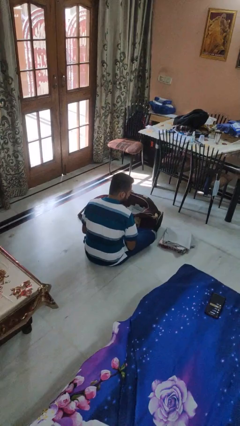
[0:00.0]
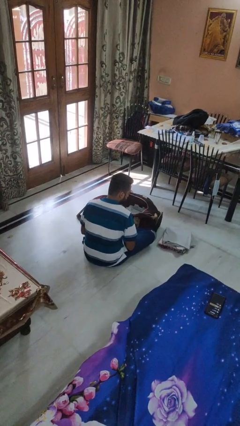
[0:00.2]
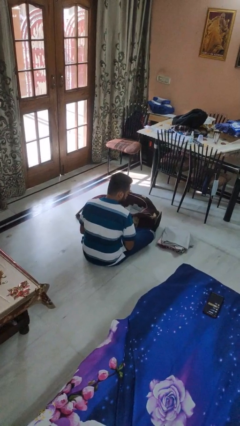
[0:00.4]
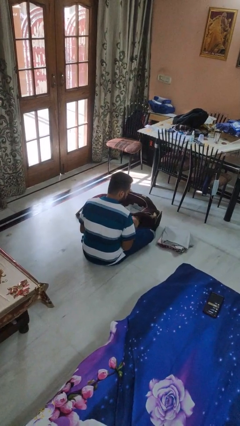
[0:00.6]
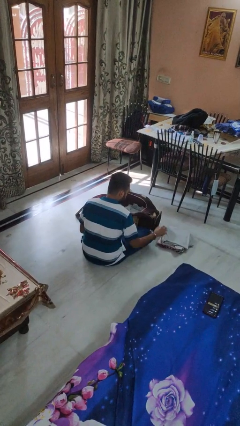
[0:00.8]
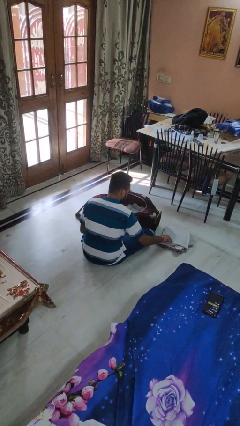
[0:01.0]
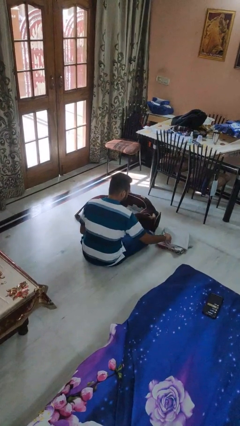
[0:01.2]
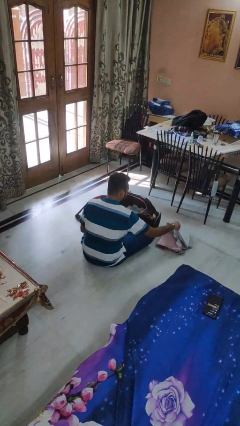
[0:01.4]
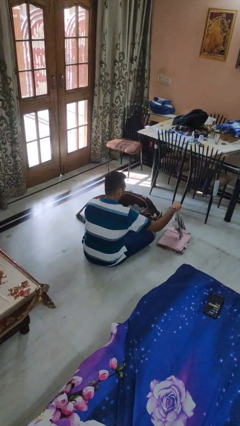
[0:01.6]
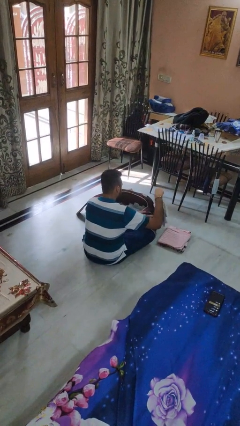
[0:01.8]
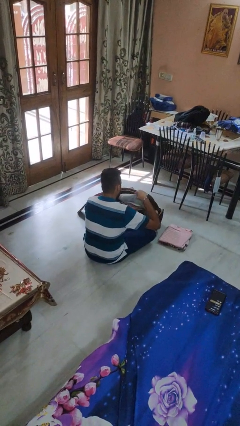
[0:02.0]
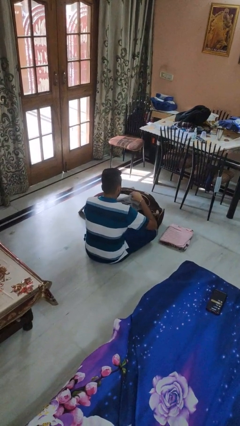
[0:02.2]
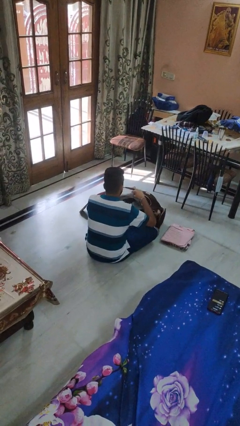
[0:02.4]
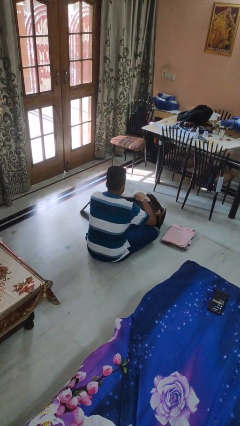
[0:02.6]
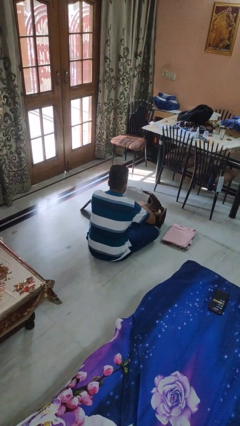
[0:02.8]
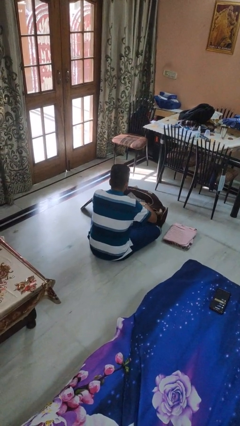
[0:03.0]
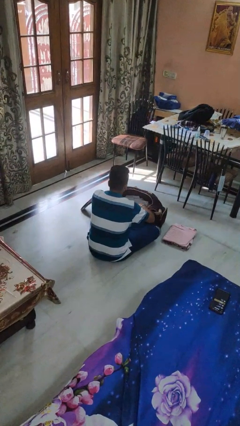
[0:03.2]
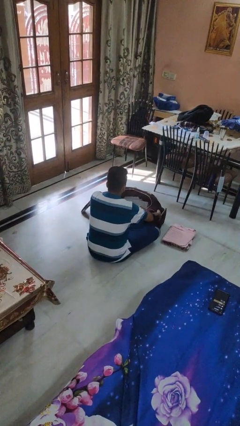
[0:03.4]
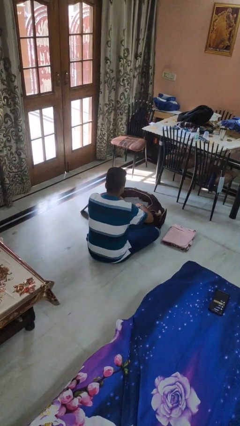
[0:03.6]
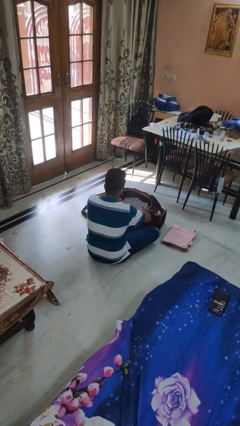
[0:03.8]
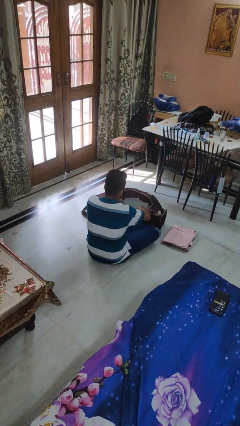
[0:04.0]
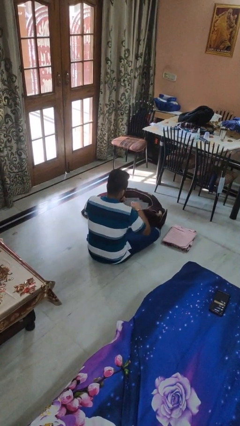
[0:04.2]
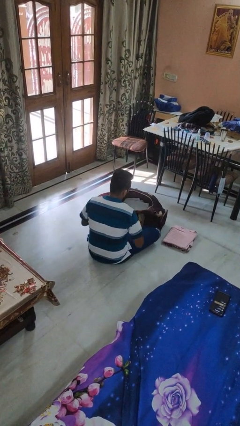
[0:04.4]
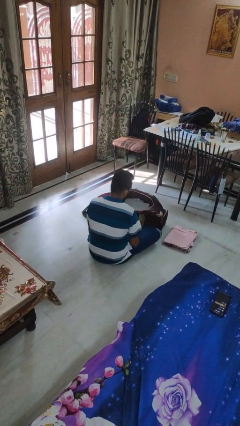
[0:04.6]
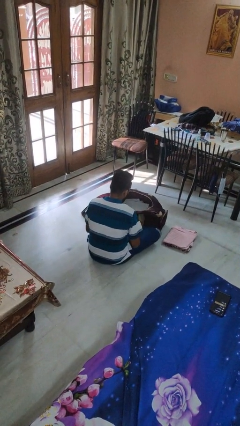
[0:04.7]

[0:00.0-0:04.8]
person loads clothes into suitcase

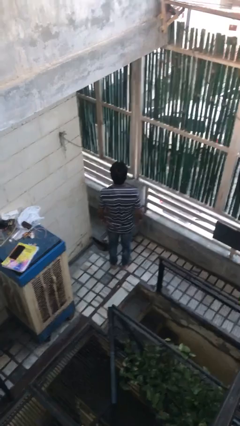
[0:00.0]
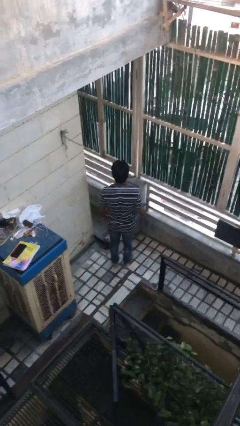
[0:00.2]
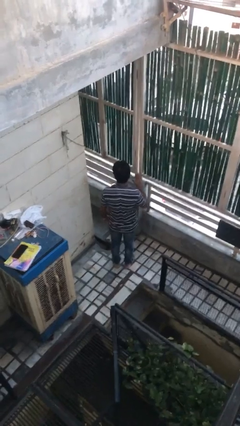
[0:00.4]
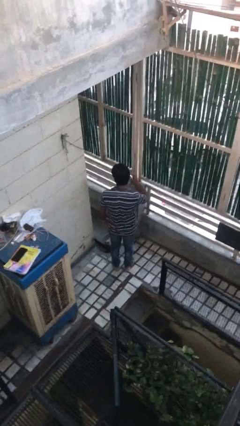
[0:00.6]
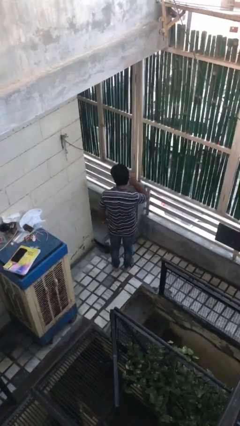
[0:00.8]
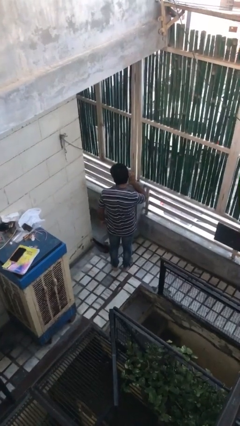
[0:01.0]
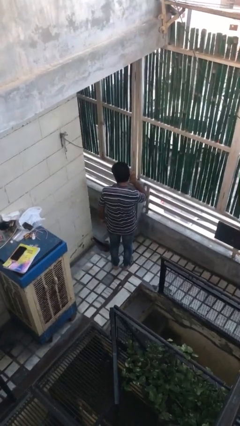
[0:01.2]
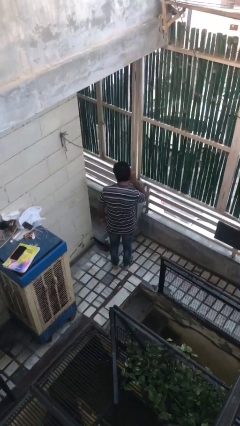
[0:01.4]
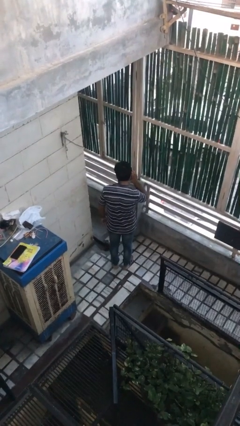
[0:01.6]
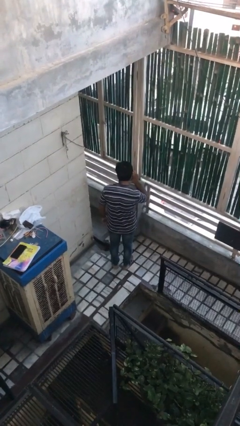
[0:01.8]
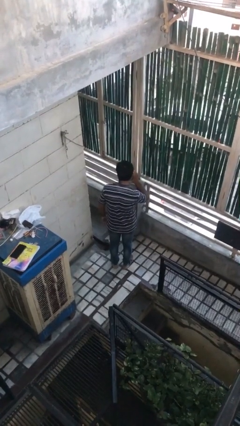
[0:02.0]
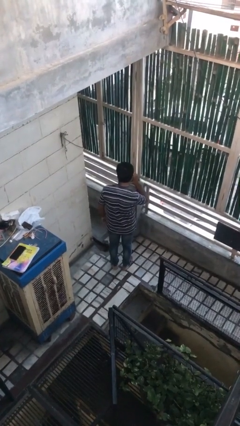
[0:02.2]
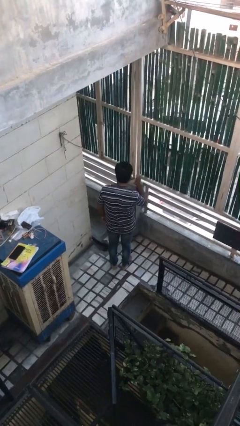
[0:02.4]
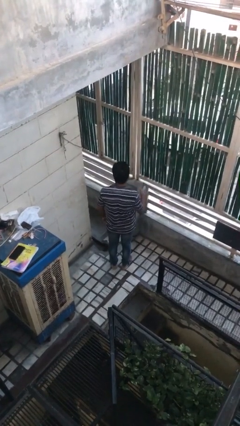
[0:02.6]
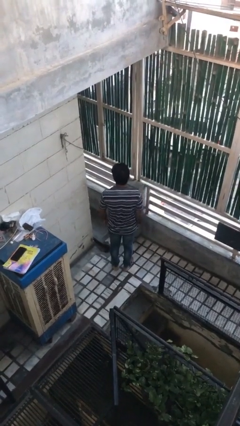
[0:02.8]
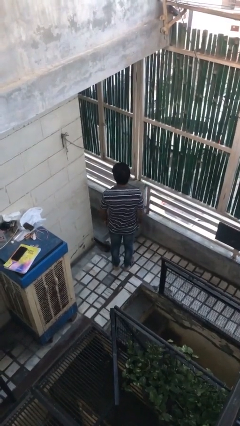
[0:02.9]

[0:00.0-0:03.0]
person gestures listen closely

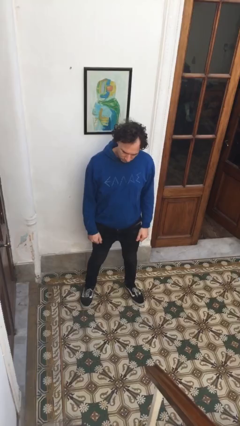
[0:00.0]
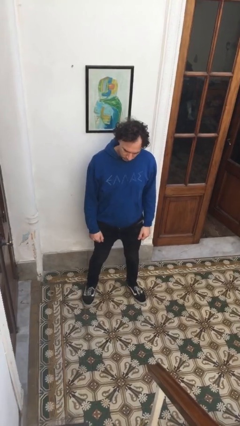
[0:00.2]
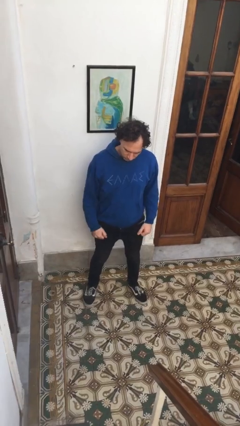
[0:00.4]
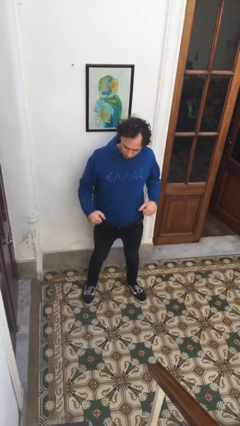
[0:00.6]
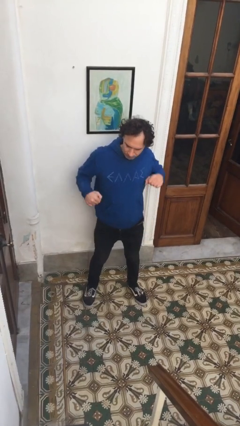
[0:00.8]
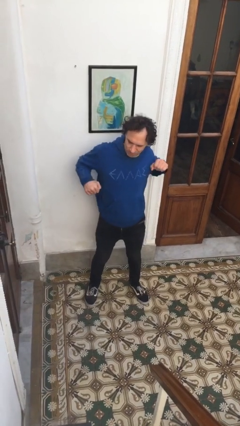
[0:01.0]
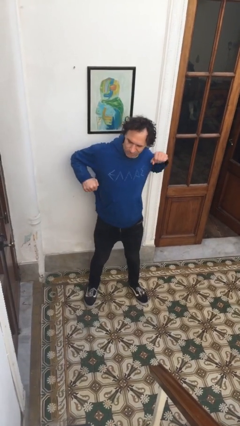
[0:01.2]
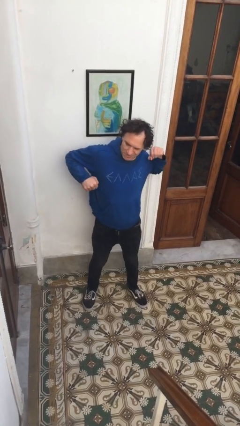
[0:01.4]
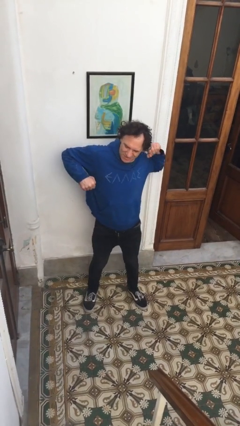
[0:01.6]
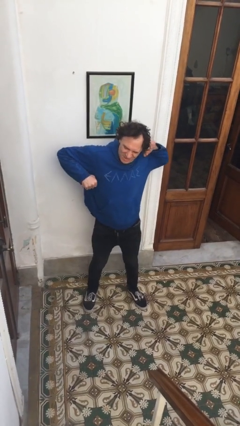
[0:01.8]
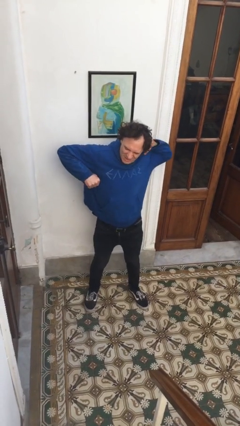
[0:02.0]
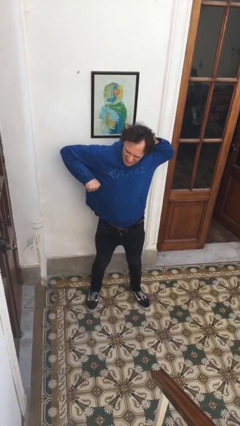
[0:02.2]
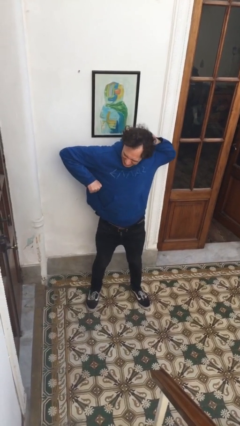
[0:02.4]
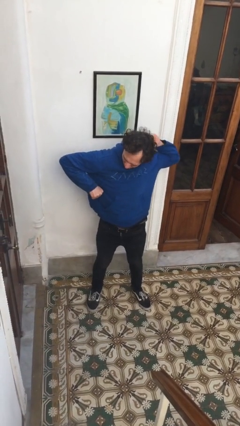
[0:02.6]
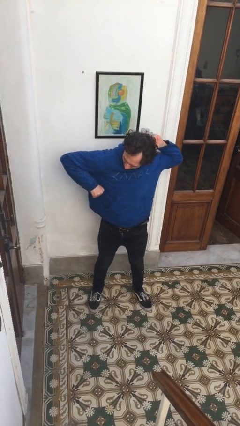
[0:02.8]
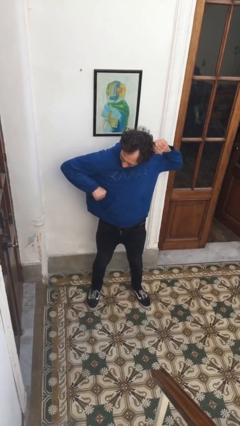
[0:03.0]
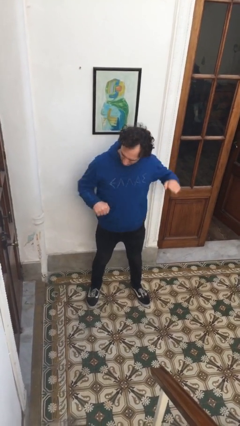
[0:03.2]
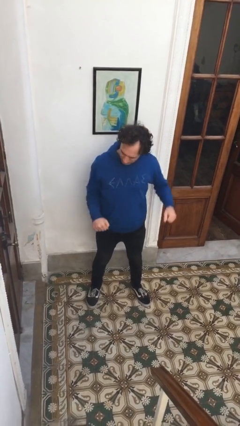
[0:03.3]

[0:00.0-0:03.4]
person stretches arms to side

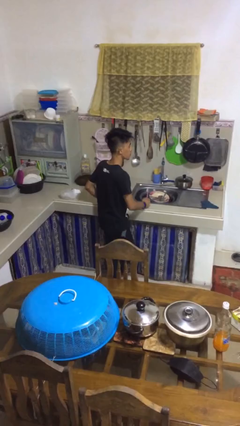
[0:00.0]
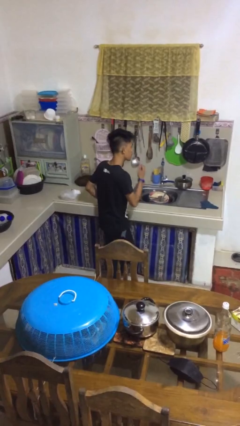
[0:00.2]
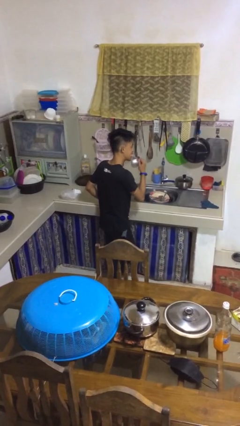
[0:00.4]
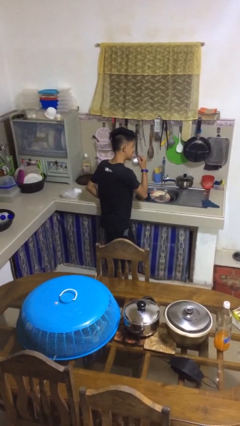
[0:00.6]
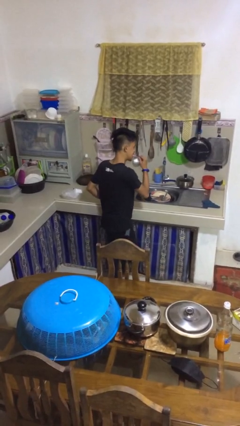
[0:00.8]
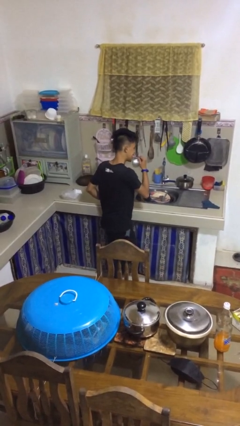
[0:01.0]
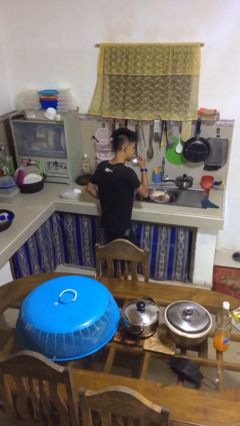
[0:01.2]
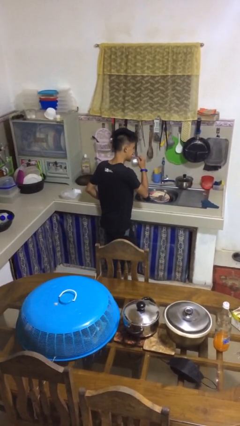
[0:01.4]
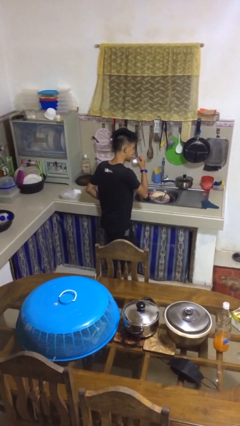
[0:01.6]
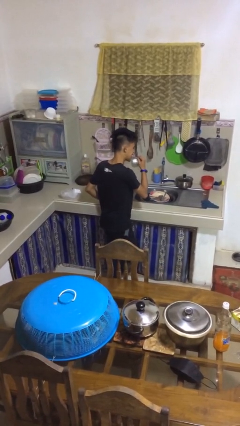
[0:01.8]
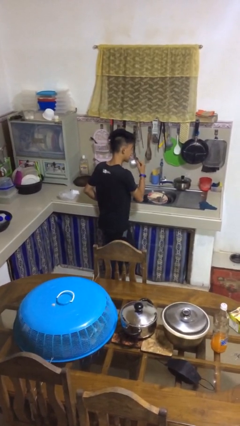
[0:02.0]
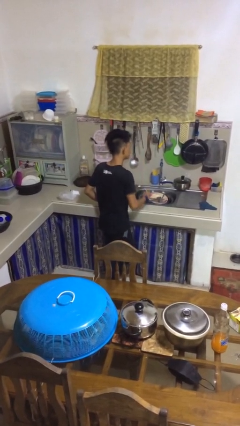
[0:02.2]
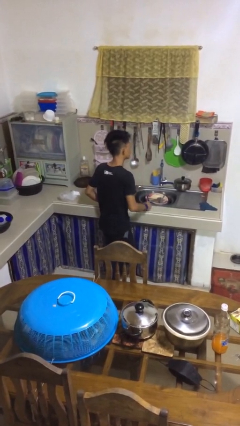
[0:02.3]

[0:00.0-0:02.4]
person brushes teeth

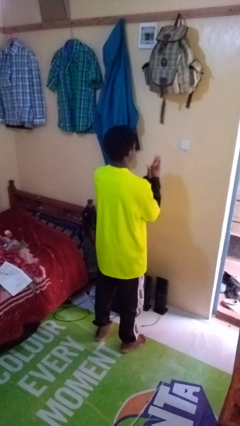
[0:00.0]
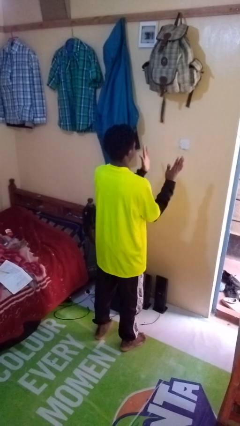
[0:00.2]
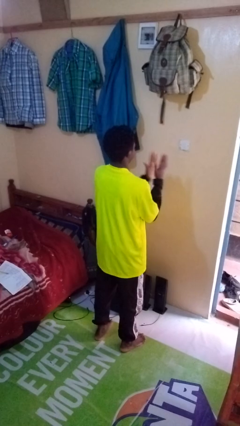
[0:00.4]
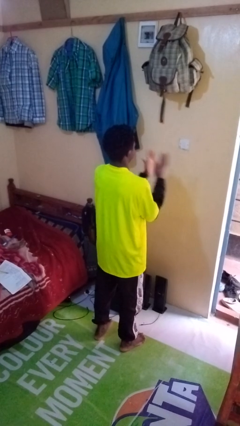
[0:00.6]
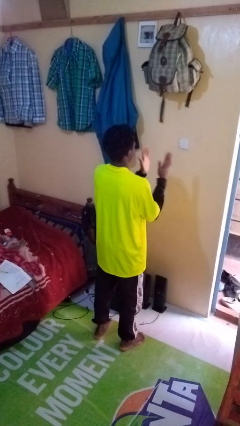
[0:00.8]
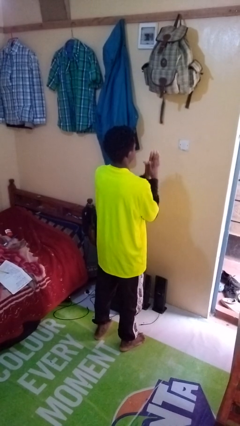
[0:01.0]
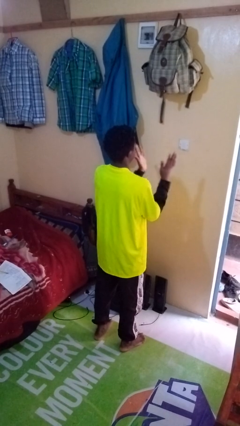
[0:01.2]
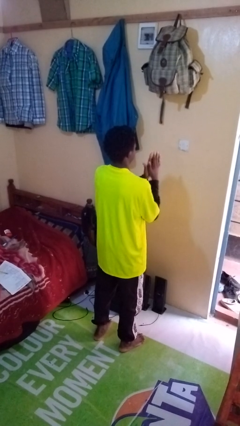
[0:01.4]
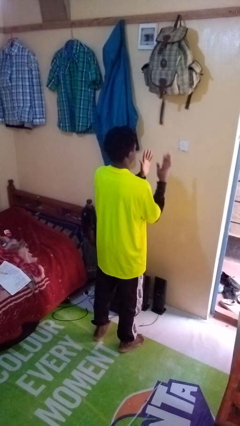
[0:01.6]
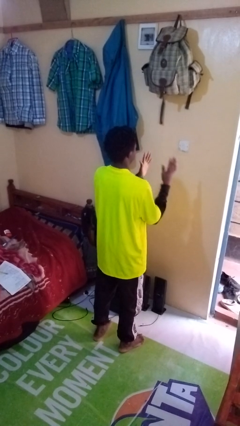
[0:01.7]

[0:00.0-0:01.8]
person claps hands

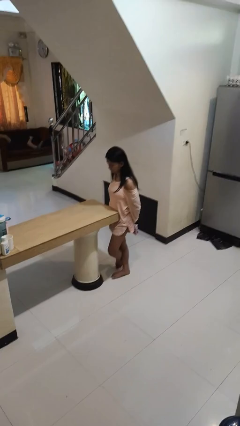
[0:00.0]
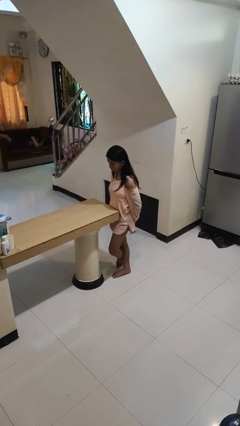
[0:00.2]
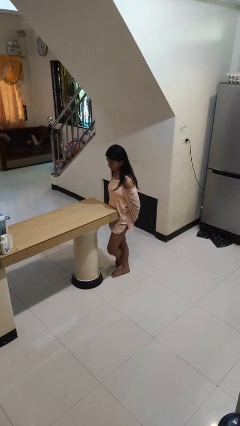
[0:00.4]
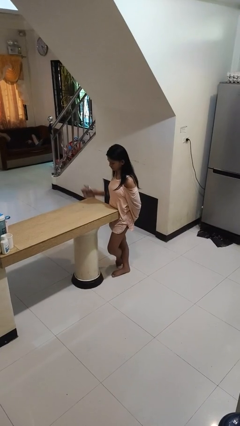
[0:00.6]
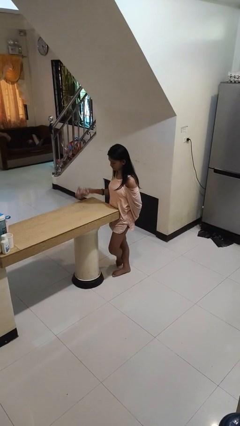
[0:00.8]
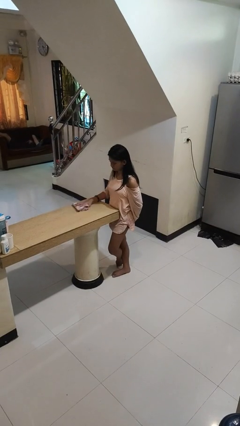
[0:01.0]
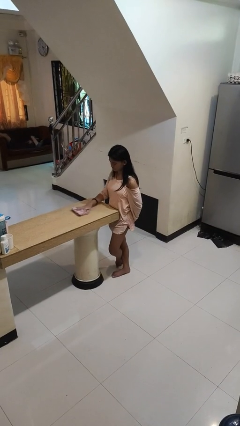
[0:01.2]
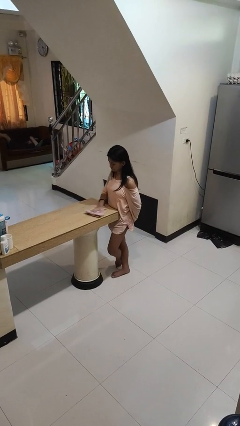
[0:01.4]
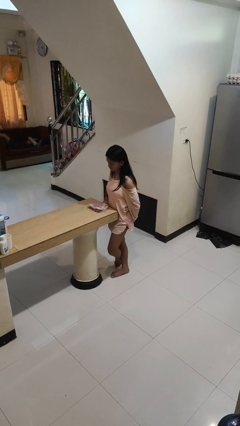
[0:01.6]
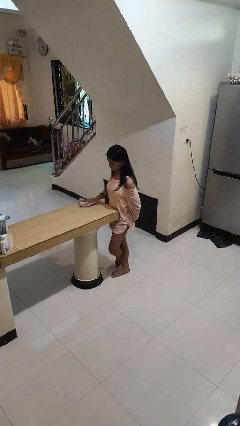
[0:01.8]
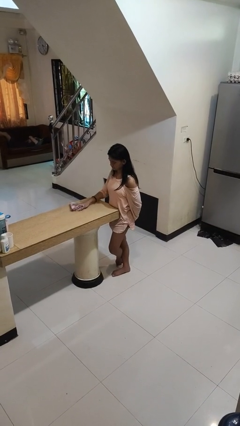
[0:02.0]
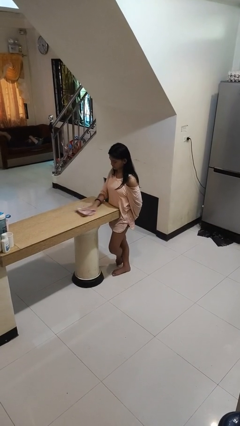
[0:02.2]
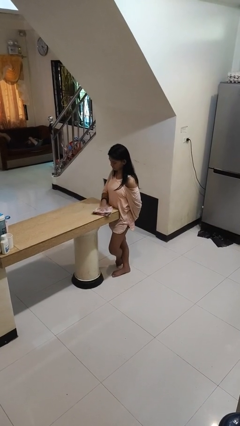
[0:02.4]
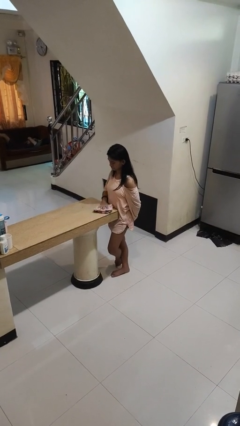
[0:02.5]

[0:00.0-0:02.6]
person cleans table with rag
